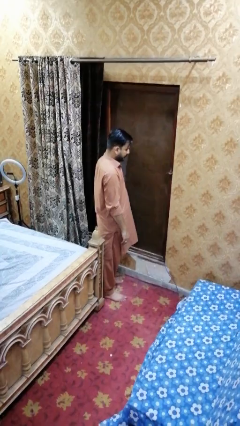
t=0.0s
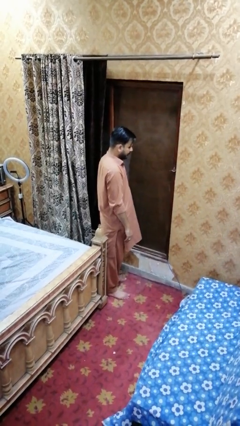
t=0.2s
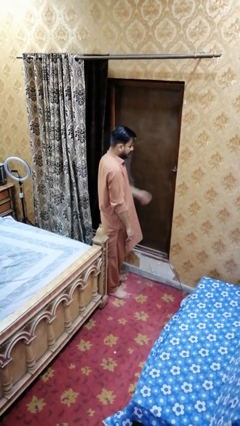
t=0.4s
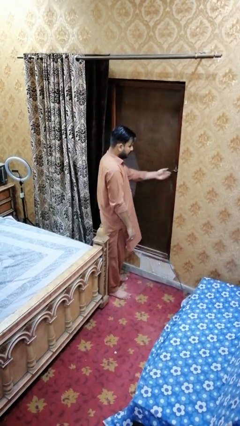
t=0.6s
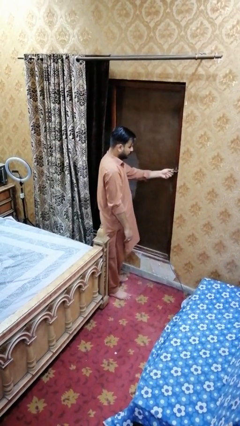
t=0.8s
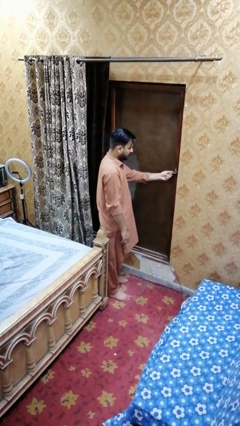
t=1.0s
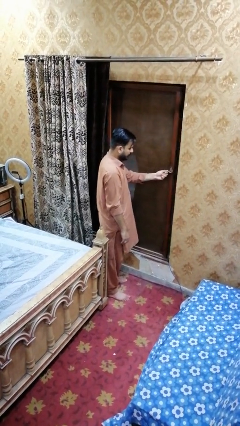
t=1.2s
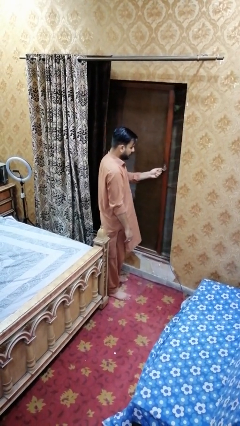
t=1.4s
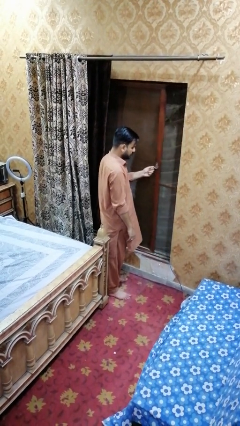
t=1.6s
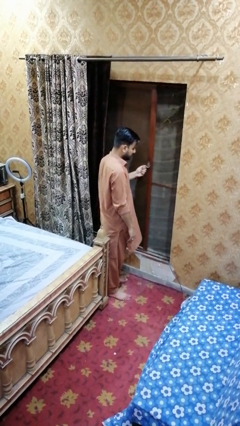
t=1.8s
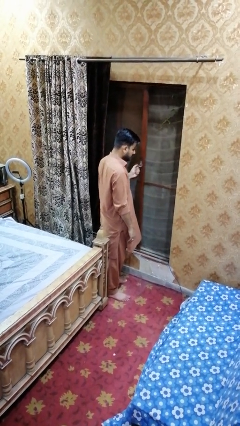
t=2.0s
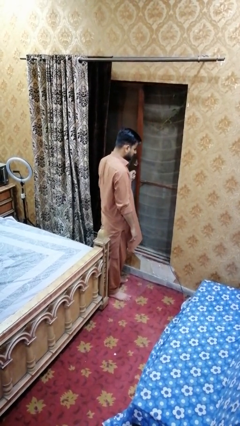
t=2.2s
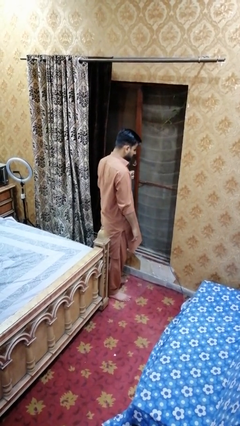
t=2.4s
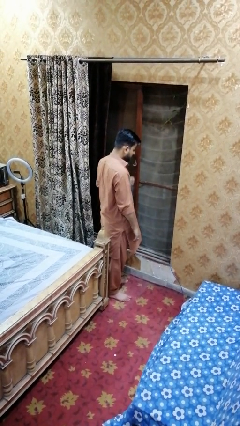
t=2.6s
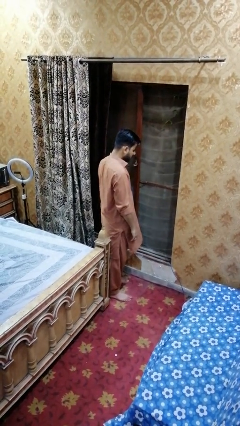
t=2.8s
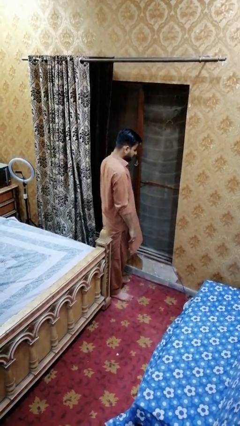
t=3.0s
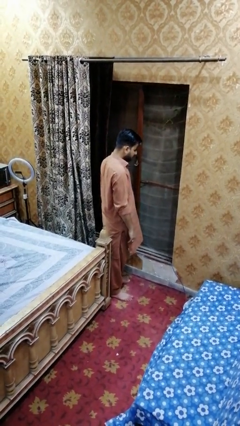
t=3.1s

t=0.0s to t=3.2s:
person opens home window

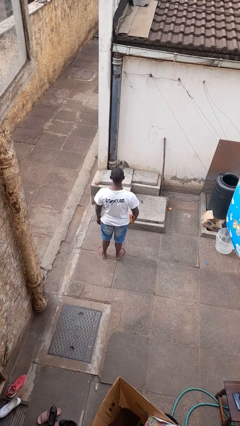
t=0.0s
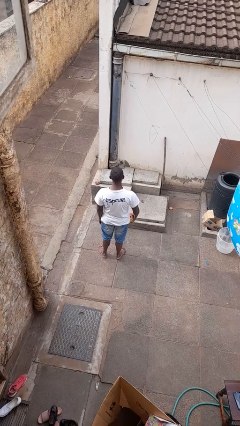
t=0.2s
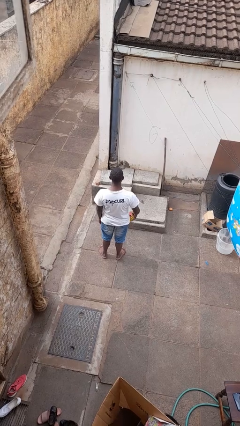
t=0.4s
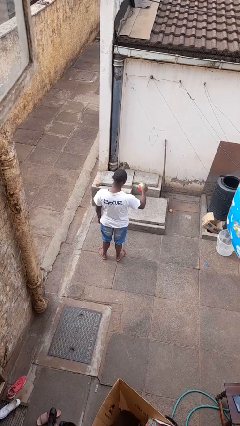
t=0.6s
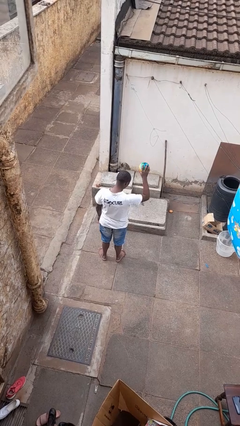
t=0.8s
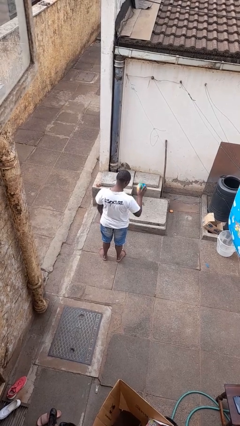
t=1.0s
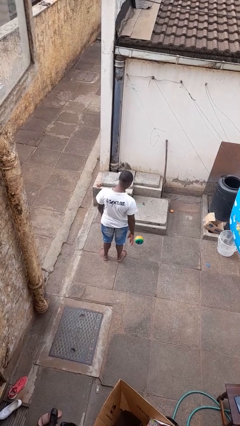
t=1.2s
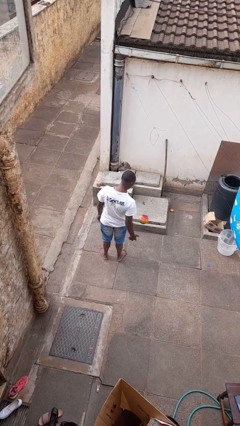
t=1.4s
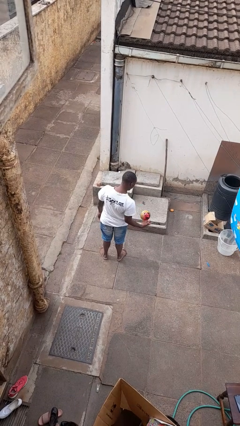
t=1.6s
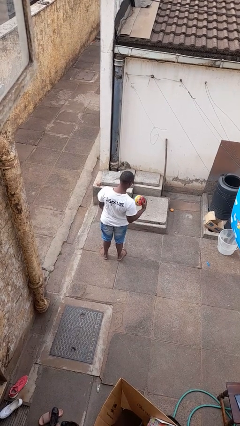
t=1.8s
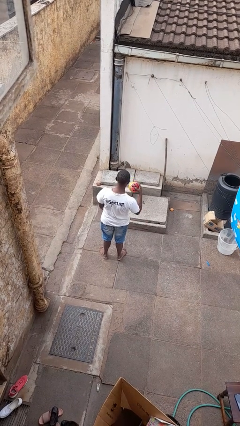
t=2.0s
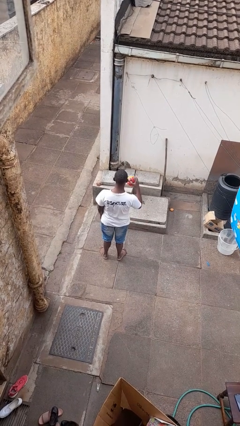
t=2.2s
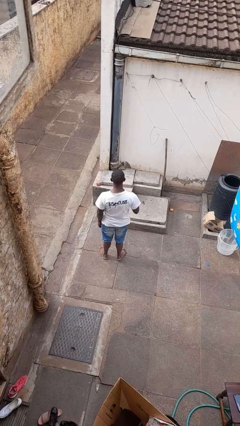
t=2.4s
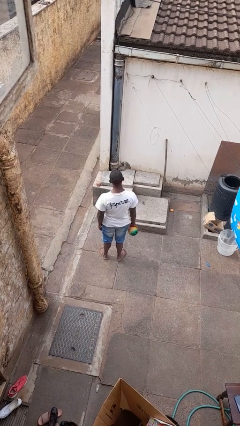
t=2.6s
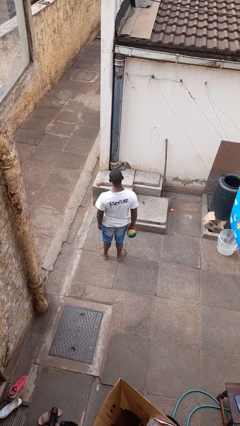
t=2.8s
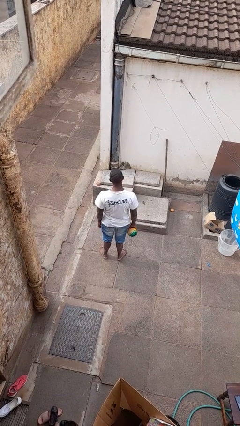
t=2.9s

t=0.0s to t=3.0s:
person bounces ball on floor

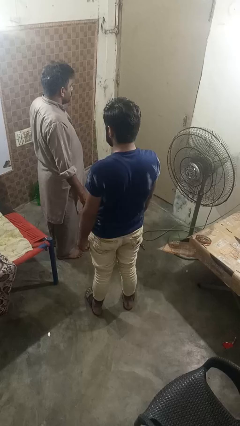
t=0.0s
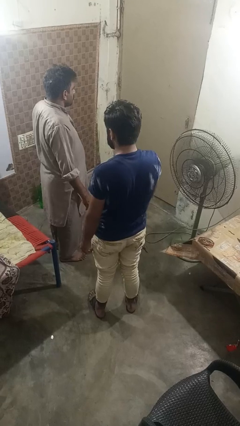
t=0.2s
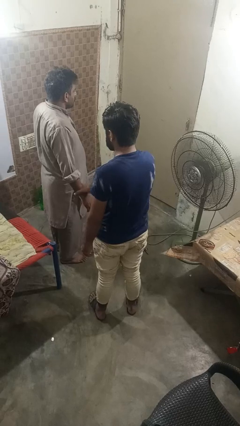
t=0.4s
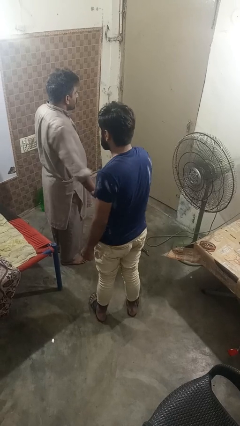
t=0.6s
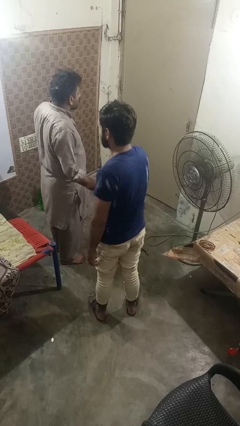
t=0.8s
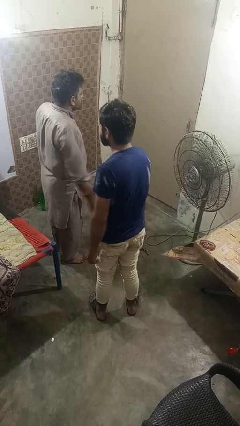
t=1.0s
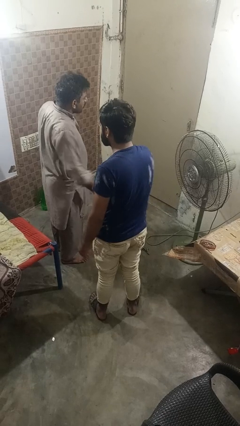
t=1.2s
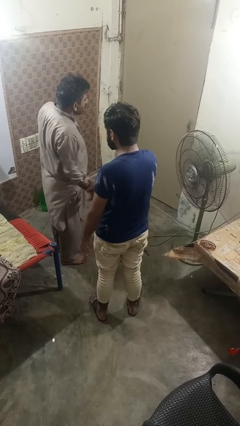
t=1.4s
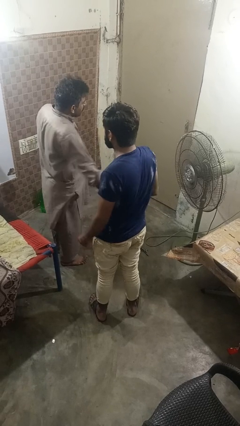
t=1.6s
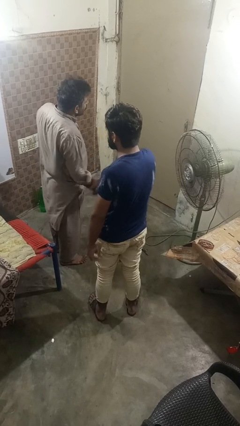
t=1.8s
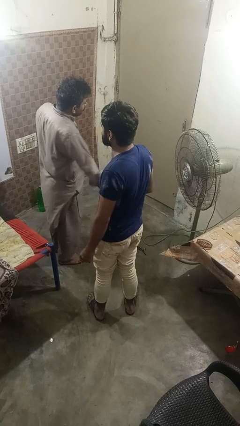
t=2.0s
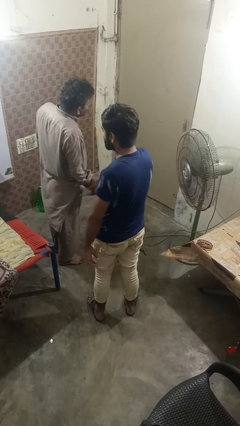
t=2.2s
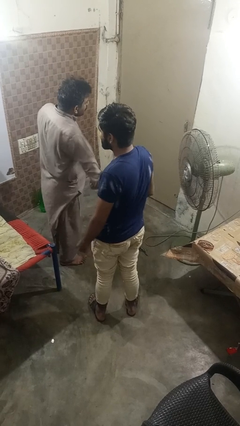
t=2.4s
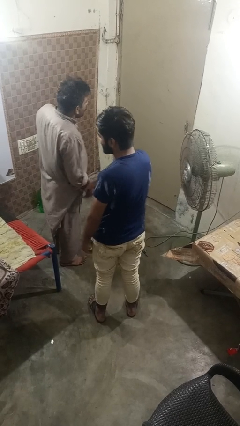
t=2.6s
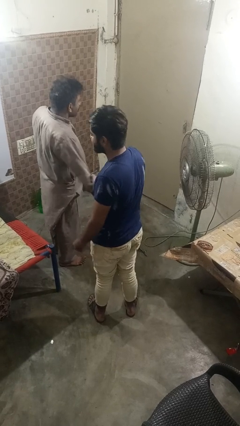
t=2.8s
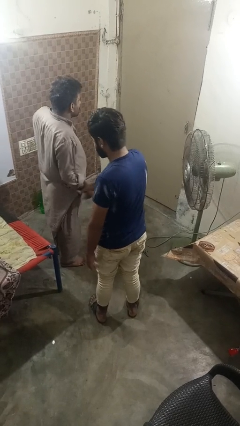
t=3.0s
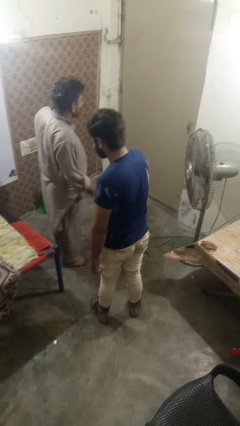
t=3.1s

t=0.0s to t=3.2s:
person grabs person by forearm

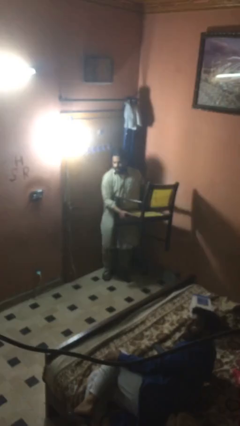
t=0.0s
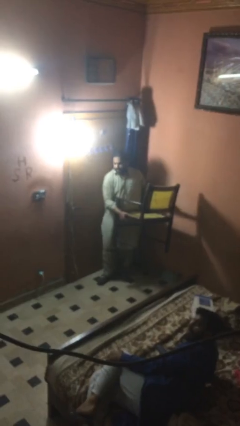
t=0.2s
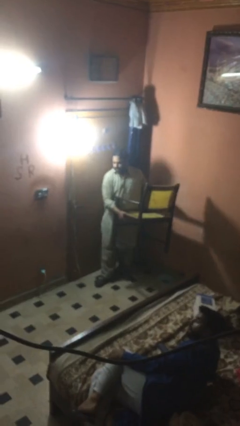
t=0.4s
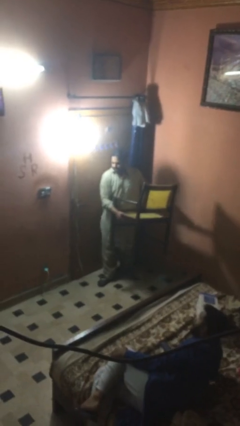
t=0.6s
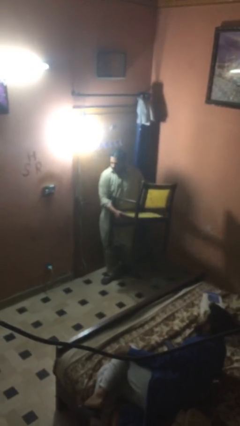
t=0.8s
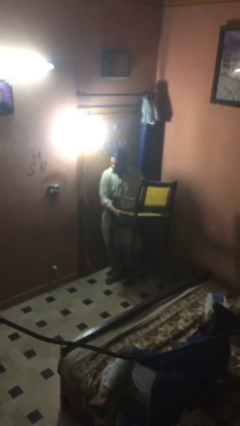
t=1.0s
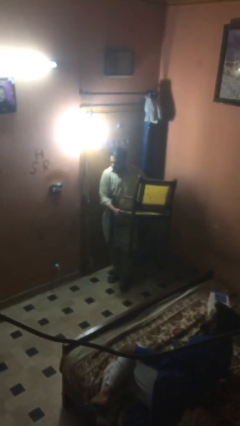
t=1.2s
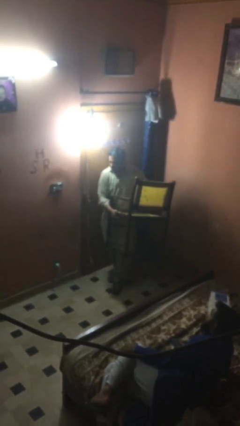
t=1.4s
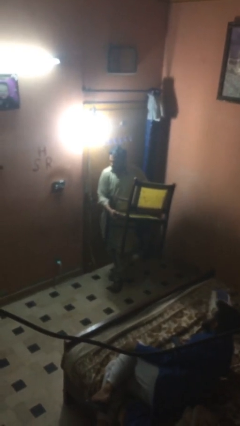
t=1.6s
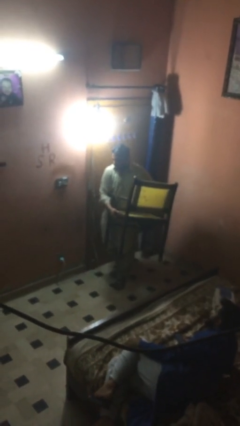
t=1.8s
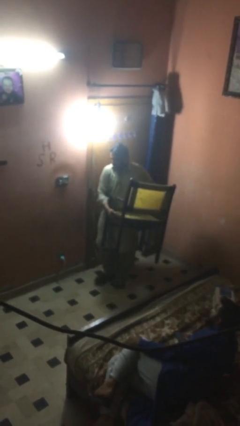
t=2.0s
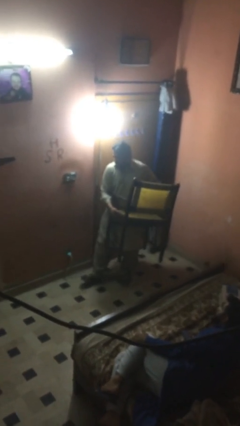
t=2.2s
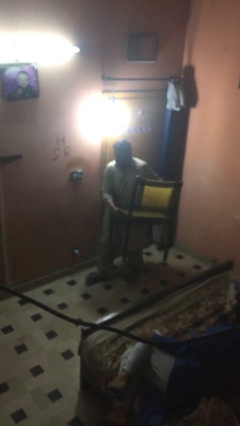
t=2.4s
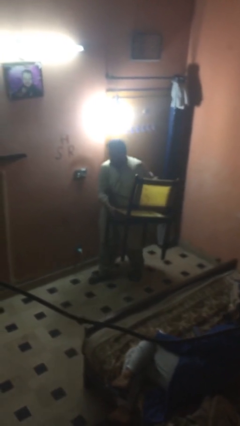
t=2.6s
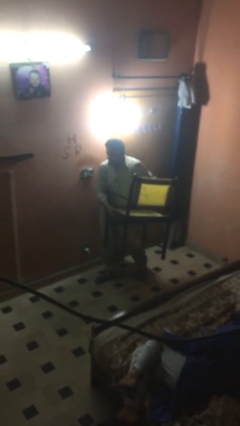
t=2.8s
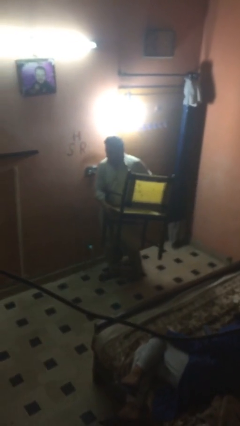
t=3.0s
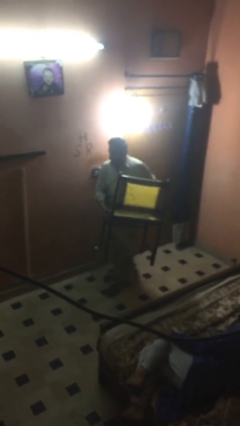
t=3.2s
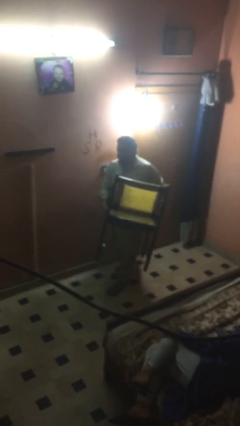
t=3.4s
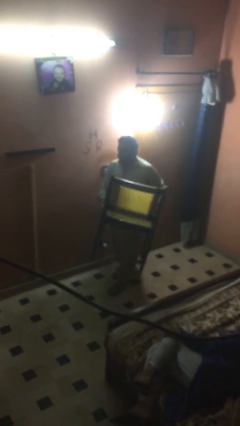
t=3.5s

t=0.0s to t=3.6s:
person carries heavy object

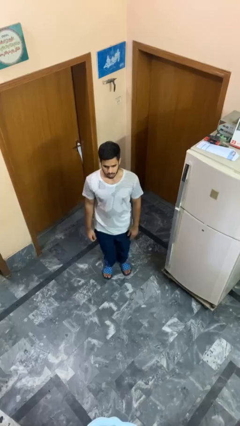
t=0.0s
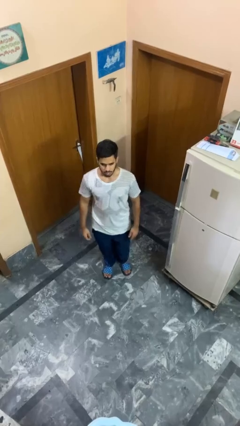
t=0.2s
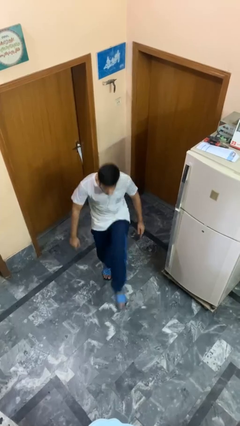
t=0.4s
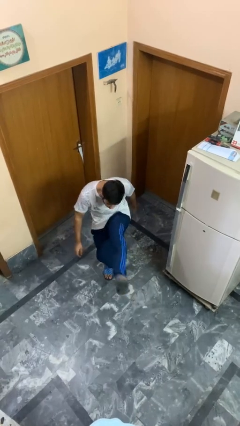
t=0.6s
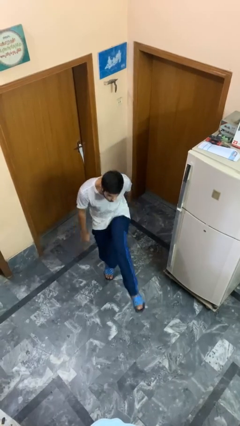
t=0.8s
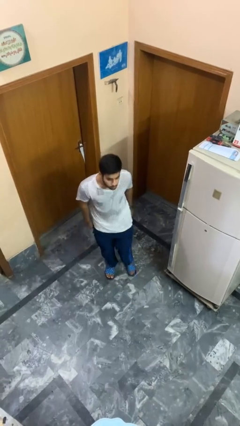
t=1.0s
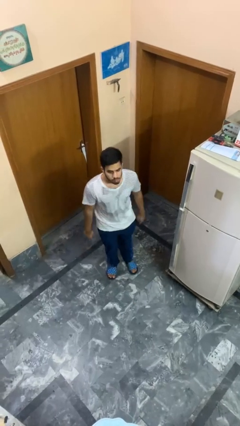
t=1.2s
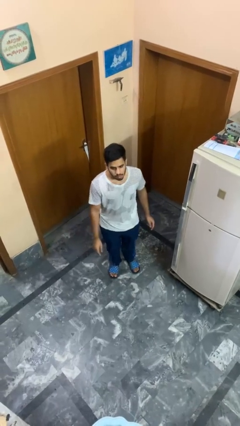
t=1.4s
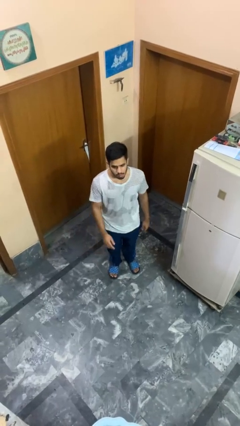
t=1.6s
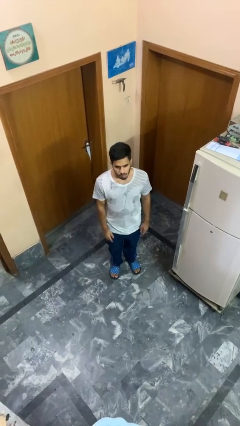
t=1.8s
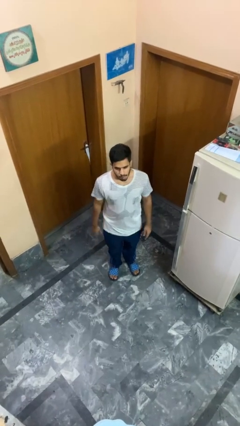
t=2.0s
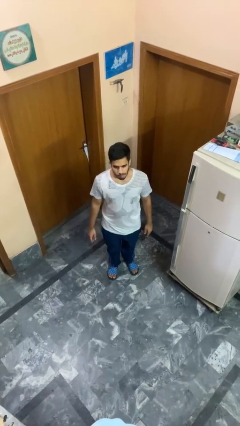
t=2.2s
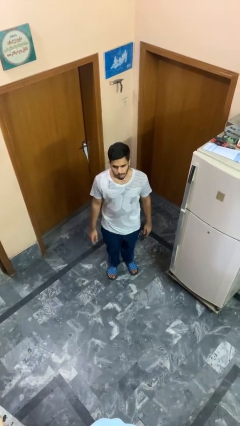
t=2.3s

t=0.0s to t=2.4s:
person karate kicks

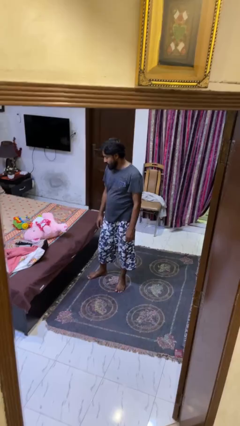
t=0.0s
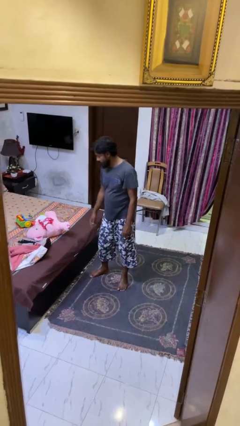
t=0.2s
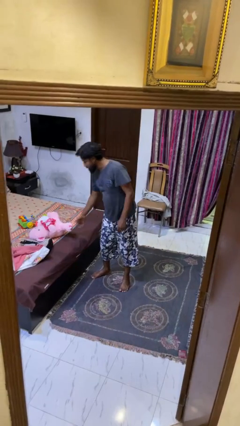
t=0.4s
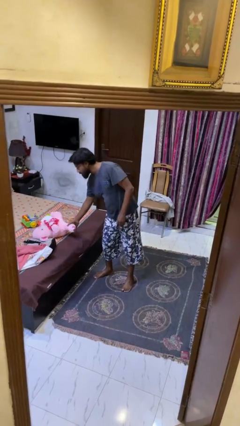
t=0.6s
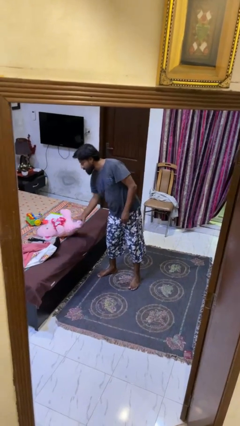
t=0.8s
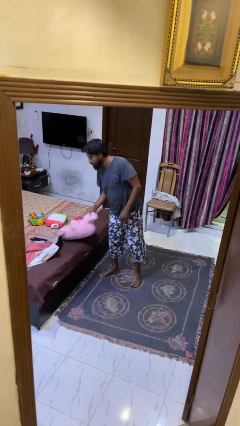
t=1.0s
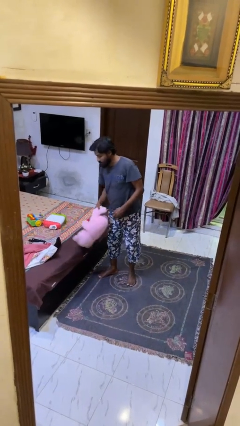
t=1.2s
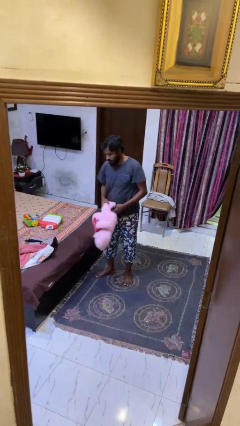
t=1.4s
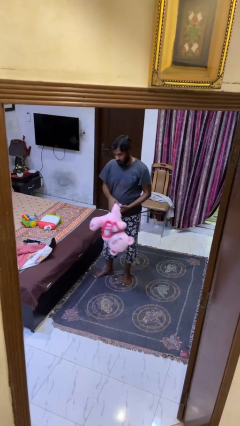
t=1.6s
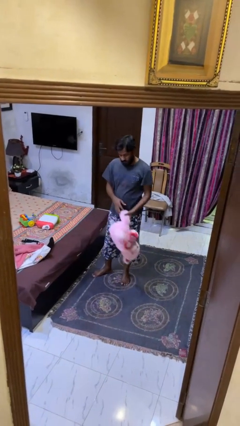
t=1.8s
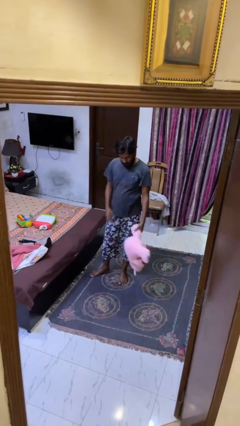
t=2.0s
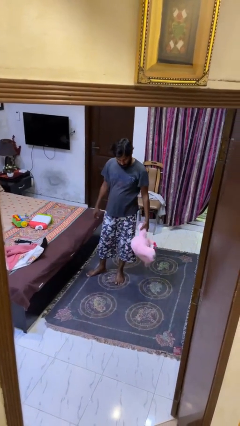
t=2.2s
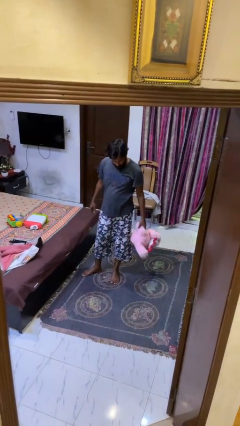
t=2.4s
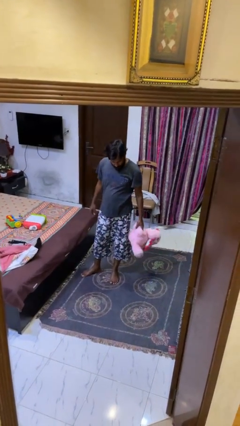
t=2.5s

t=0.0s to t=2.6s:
person picks up object from bed
